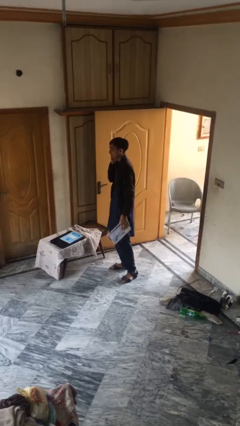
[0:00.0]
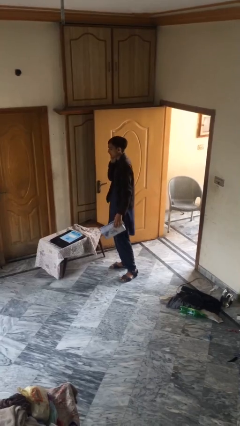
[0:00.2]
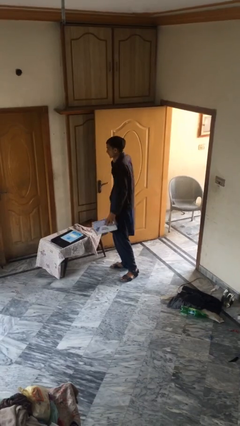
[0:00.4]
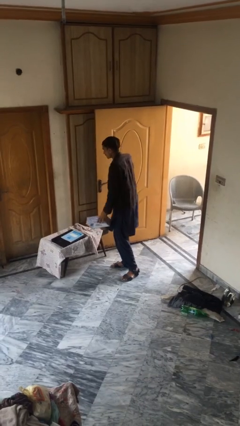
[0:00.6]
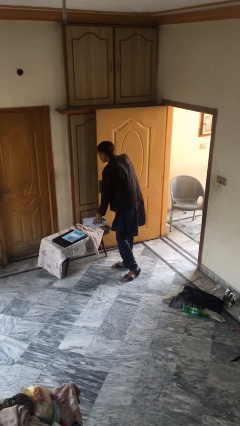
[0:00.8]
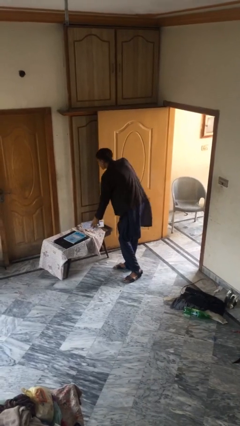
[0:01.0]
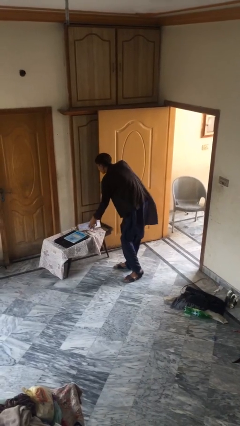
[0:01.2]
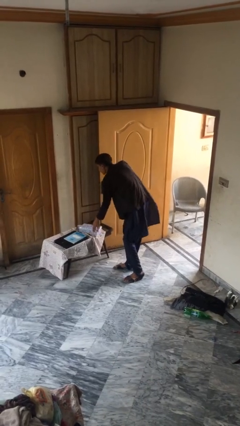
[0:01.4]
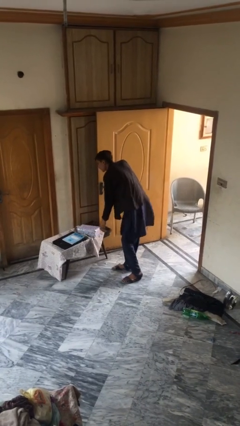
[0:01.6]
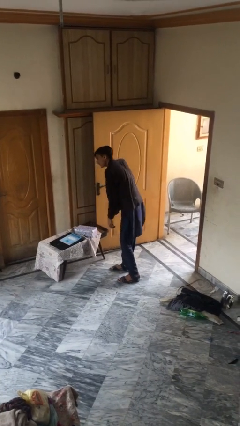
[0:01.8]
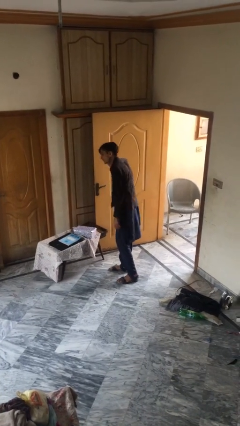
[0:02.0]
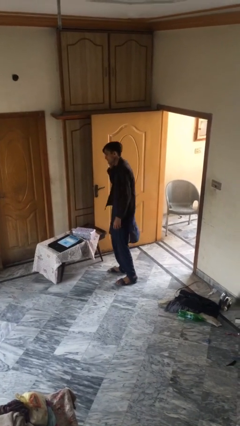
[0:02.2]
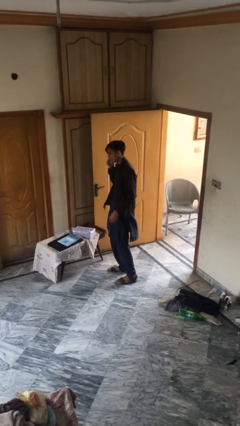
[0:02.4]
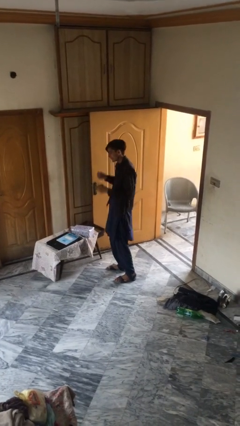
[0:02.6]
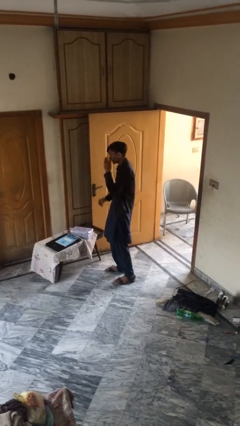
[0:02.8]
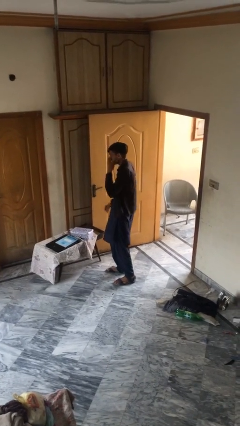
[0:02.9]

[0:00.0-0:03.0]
person puts down object on table

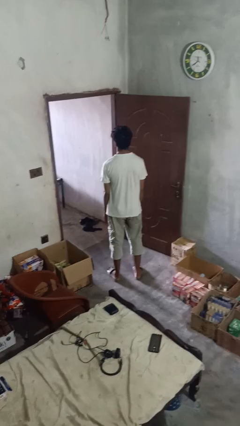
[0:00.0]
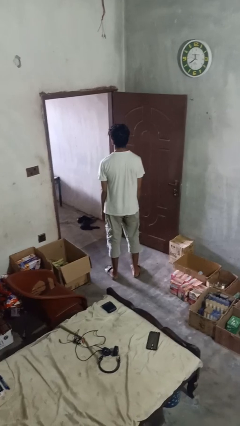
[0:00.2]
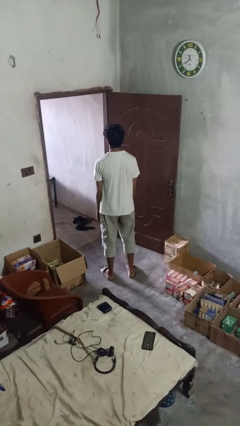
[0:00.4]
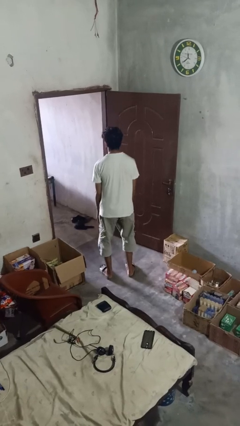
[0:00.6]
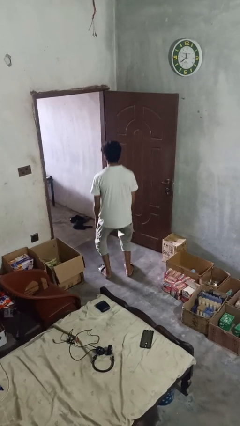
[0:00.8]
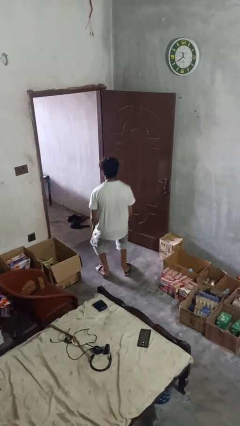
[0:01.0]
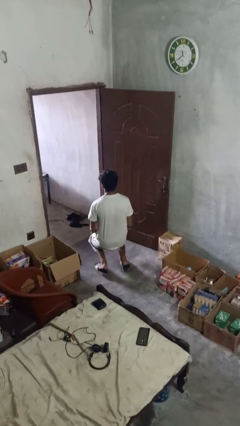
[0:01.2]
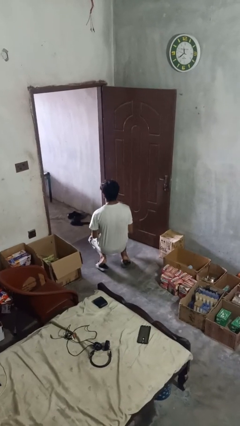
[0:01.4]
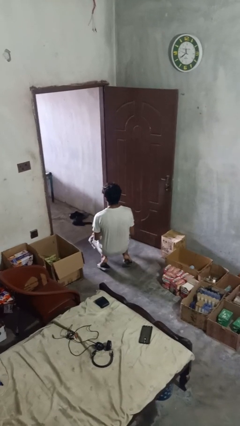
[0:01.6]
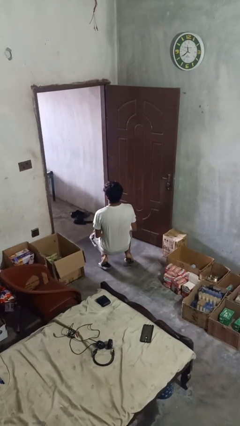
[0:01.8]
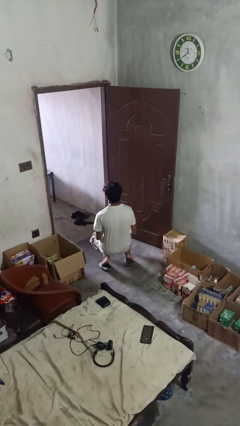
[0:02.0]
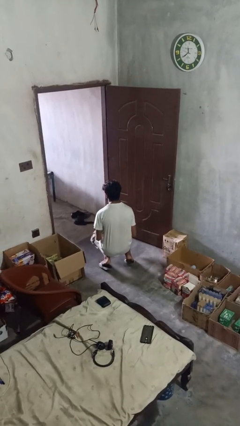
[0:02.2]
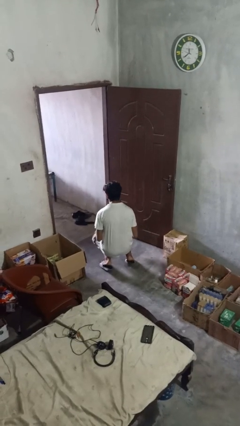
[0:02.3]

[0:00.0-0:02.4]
person kneels

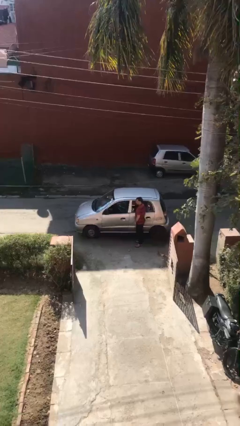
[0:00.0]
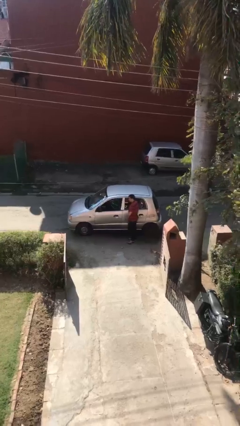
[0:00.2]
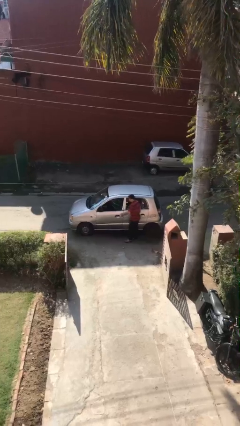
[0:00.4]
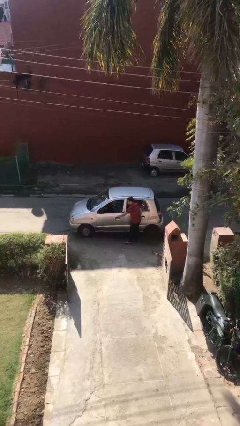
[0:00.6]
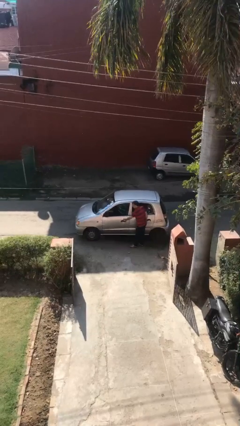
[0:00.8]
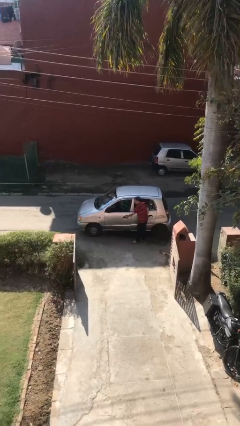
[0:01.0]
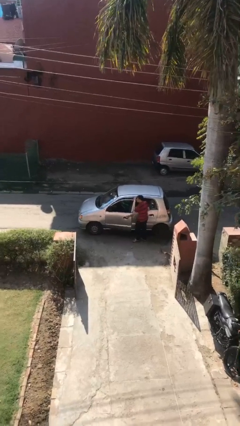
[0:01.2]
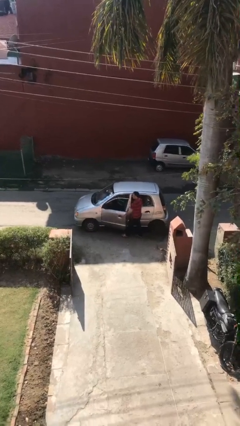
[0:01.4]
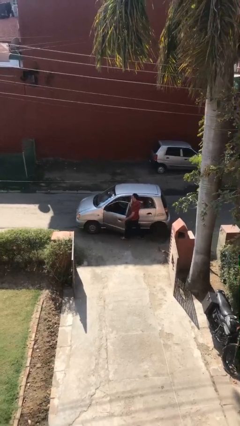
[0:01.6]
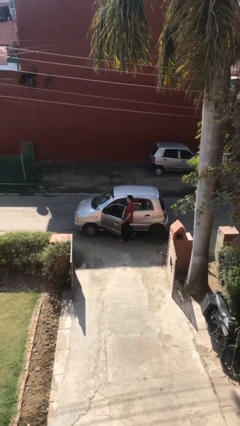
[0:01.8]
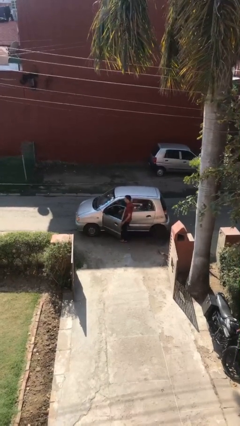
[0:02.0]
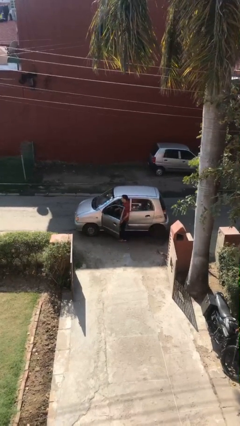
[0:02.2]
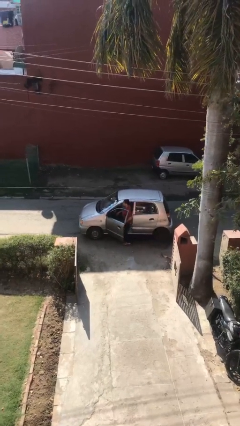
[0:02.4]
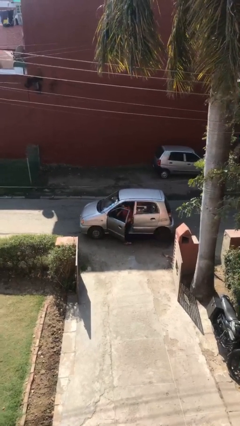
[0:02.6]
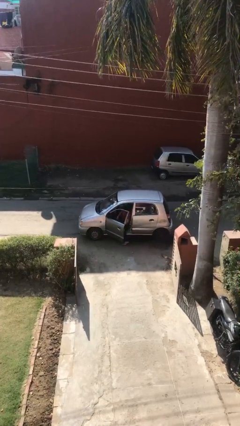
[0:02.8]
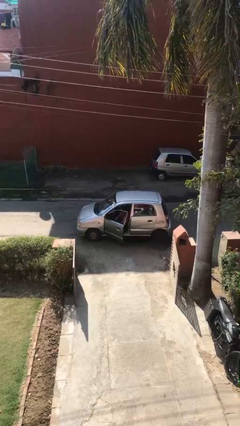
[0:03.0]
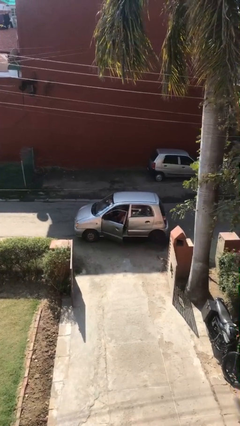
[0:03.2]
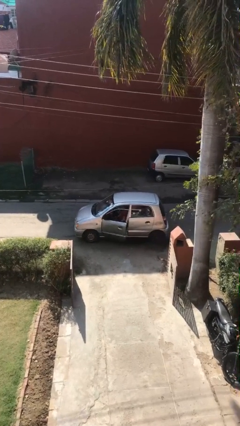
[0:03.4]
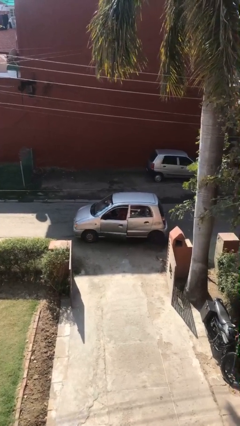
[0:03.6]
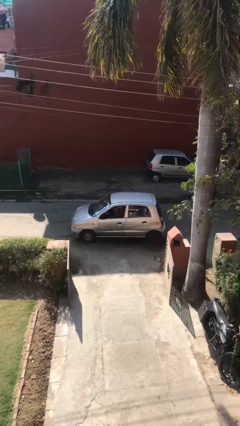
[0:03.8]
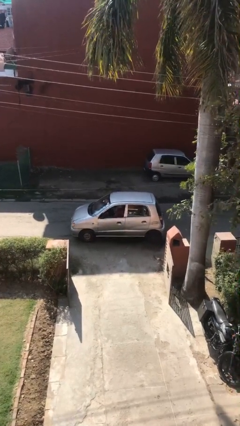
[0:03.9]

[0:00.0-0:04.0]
car picks up person

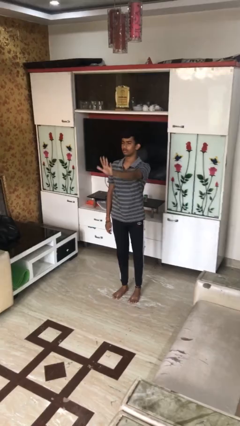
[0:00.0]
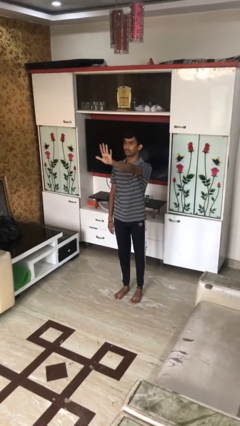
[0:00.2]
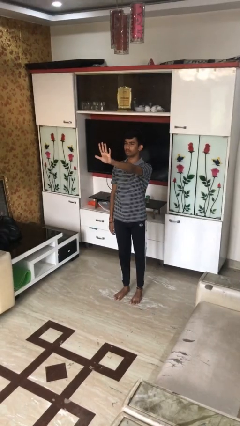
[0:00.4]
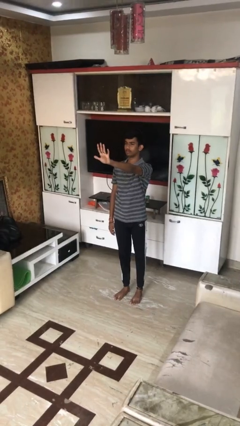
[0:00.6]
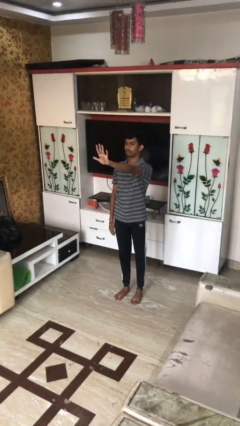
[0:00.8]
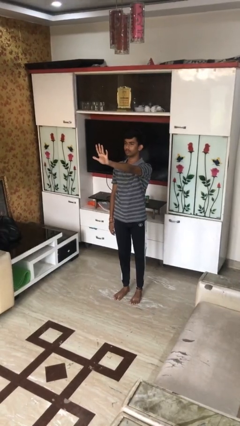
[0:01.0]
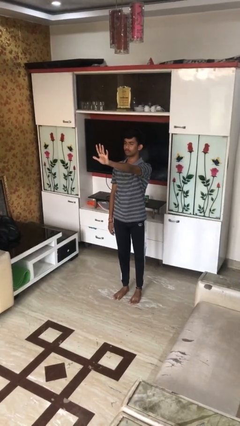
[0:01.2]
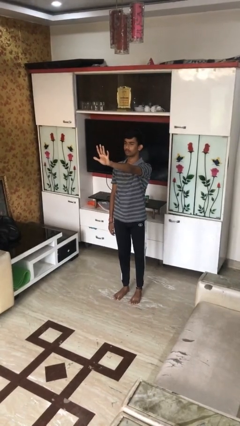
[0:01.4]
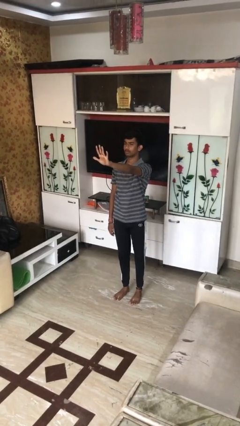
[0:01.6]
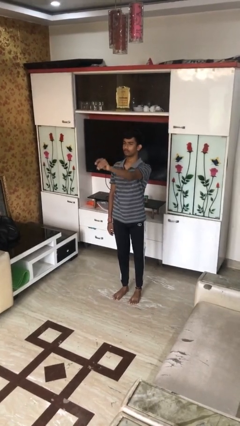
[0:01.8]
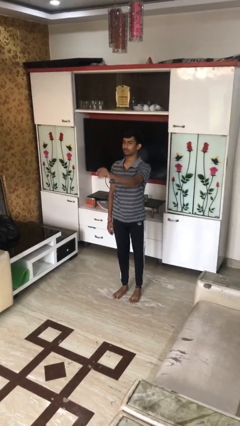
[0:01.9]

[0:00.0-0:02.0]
person gestures number five

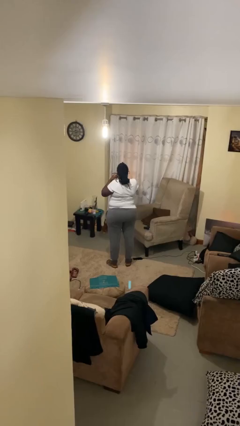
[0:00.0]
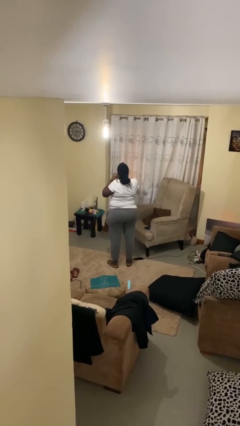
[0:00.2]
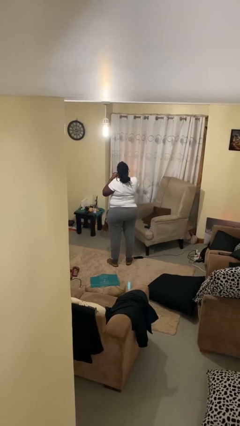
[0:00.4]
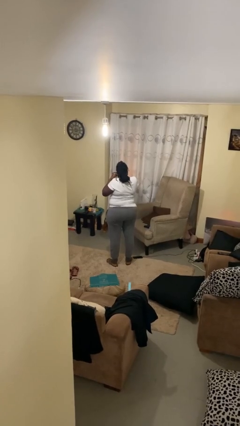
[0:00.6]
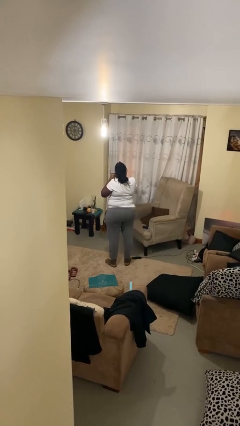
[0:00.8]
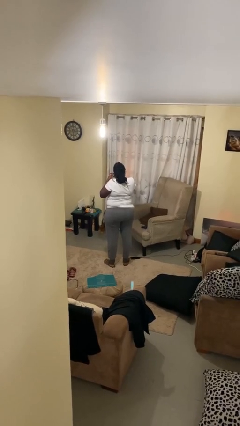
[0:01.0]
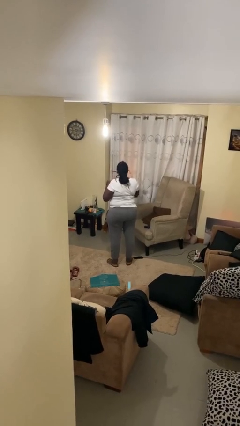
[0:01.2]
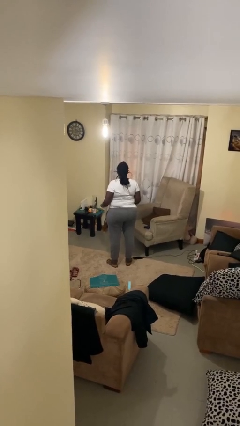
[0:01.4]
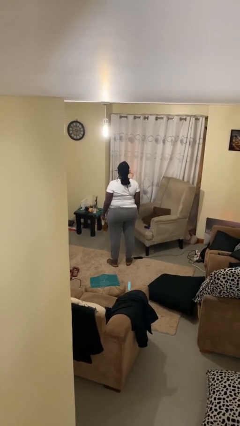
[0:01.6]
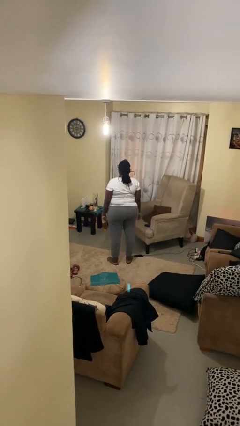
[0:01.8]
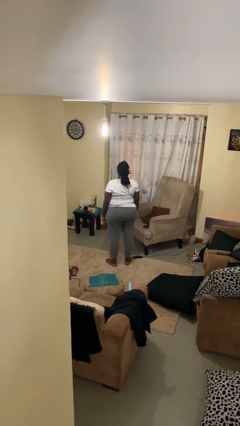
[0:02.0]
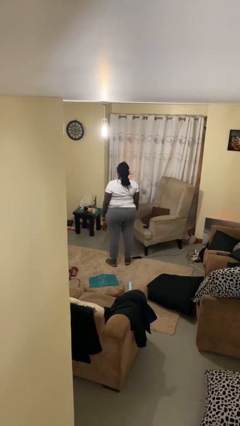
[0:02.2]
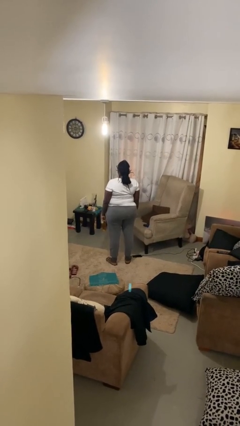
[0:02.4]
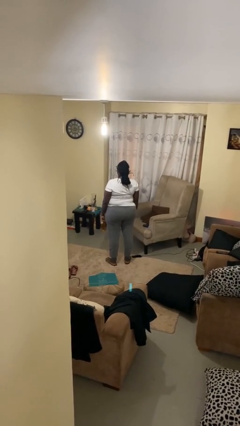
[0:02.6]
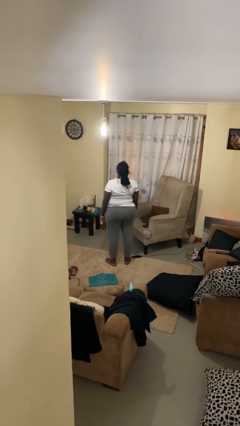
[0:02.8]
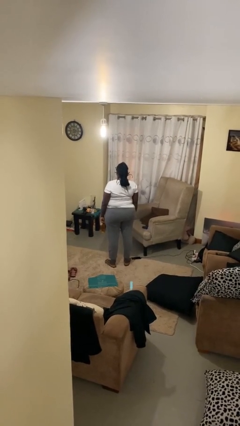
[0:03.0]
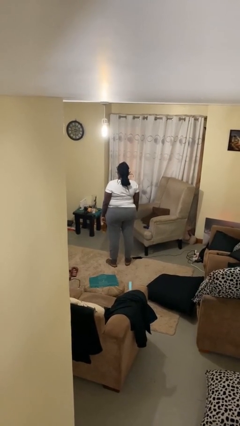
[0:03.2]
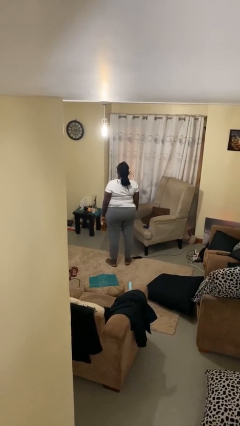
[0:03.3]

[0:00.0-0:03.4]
person takes off earrings

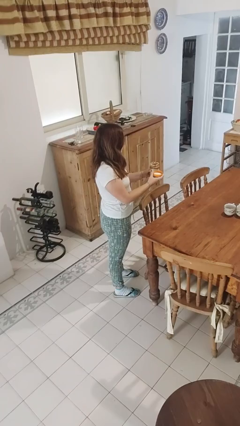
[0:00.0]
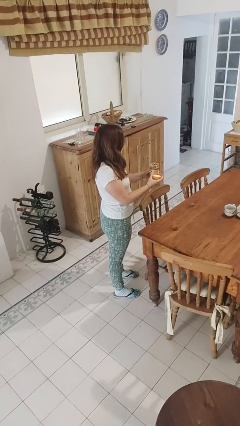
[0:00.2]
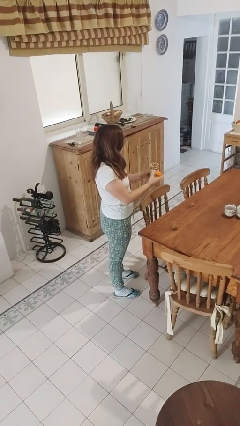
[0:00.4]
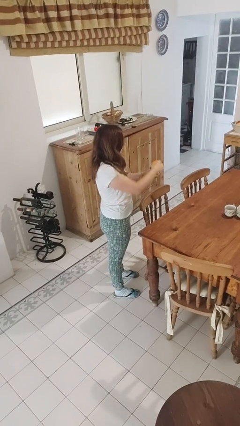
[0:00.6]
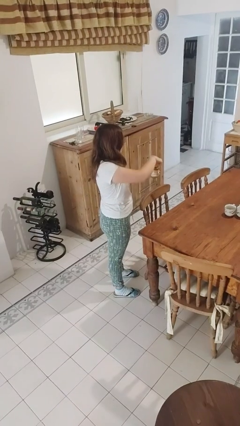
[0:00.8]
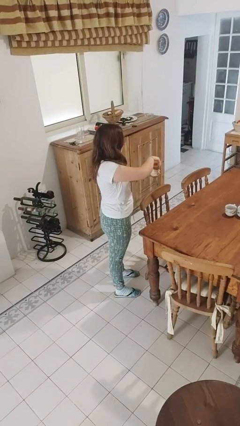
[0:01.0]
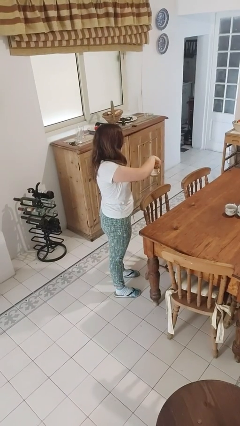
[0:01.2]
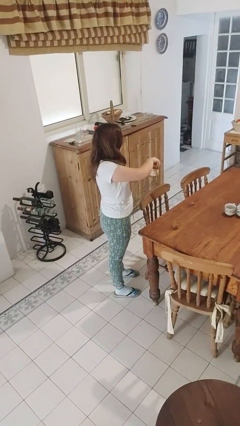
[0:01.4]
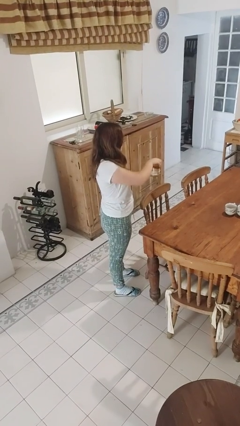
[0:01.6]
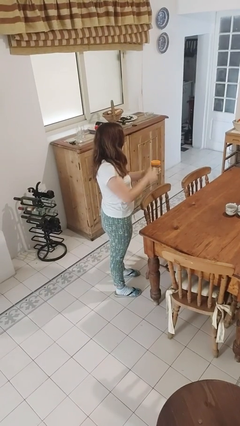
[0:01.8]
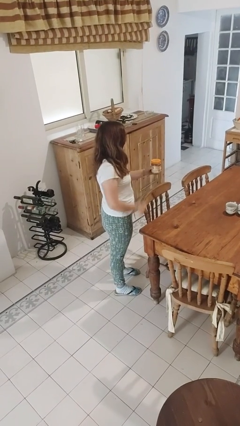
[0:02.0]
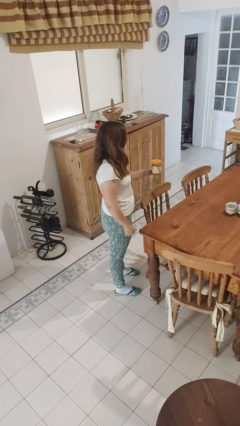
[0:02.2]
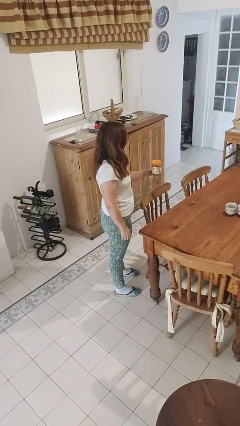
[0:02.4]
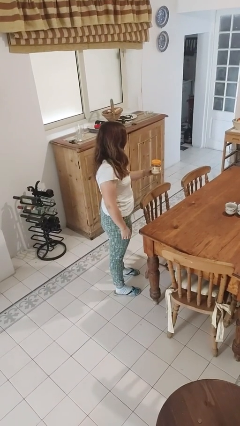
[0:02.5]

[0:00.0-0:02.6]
person closes jar
